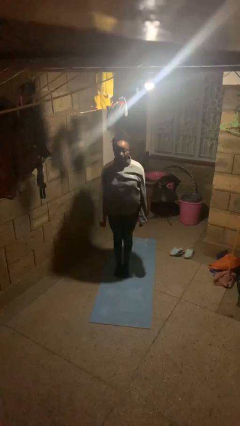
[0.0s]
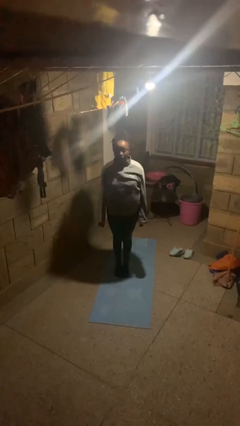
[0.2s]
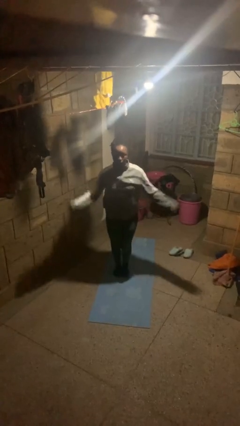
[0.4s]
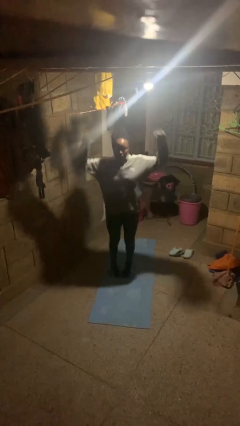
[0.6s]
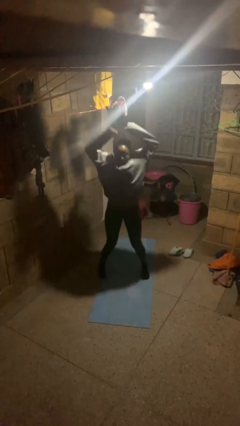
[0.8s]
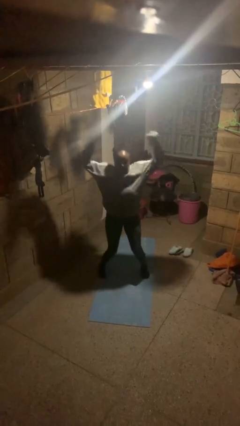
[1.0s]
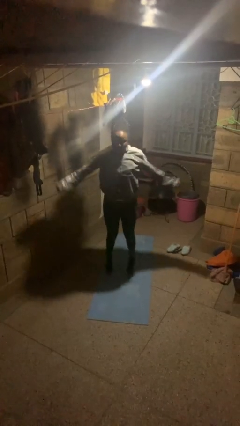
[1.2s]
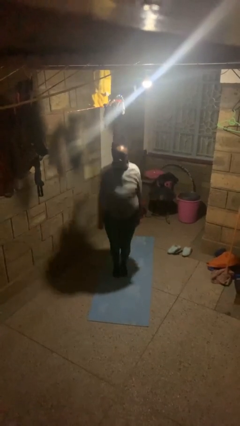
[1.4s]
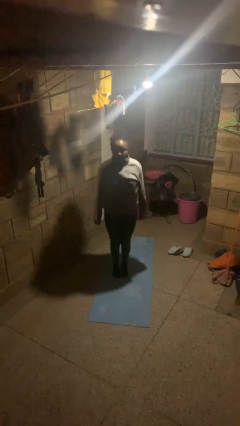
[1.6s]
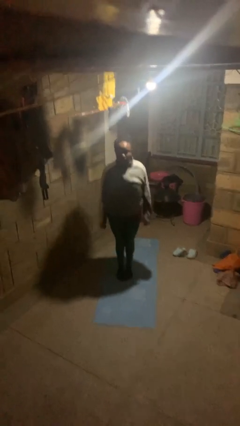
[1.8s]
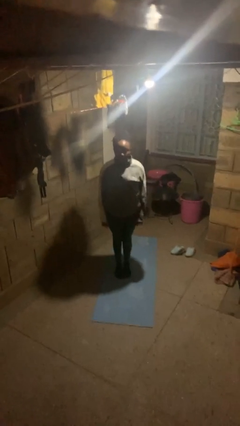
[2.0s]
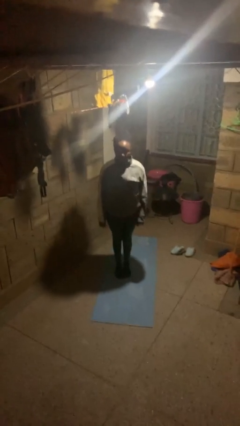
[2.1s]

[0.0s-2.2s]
person exercises with jumping jacks

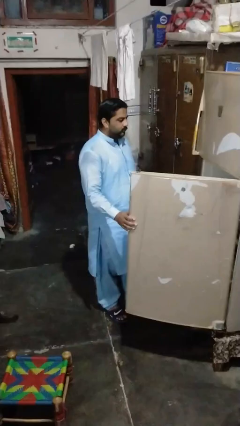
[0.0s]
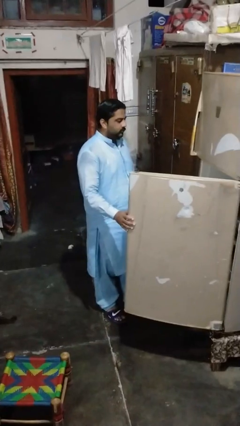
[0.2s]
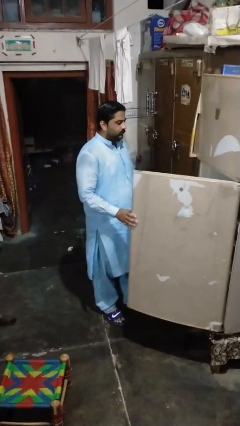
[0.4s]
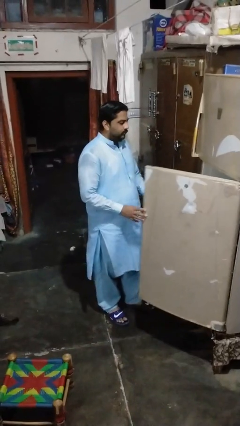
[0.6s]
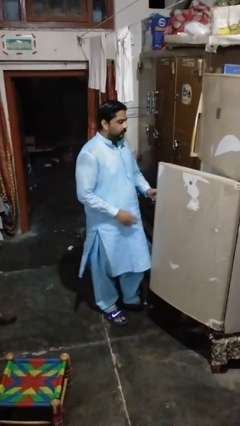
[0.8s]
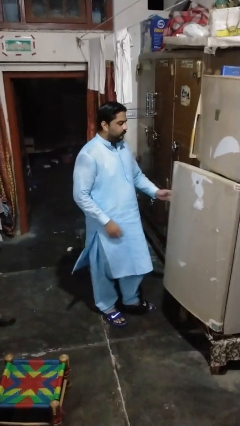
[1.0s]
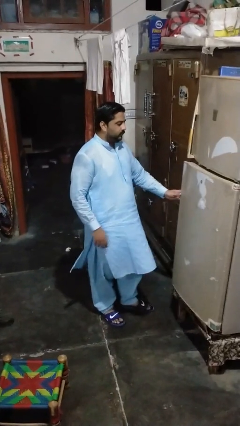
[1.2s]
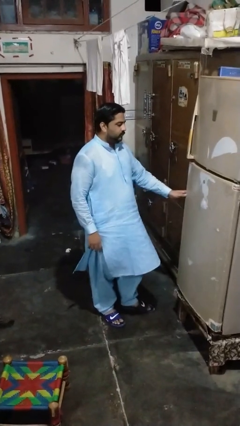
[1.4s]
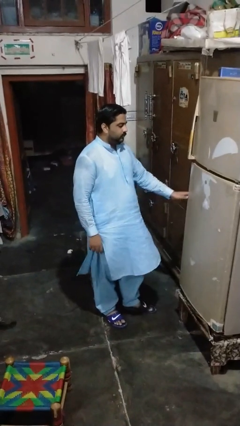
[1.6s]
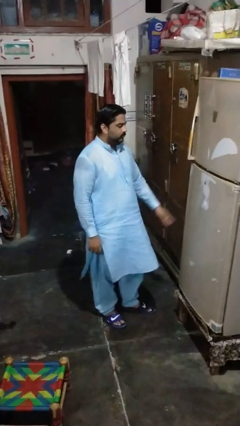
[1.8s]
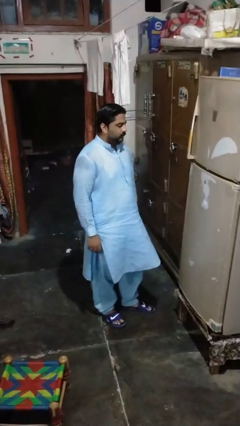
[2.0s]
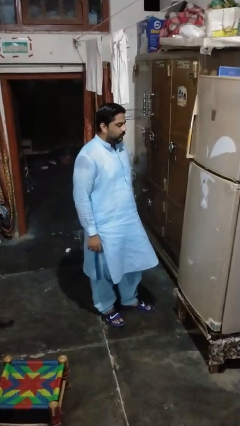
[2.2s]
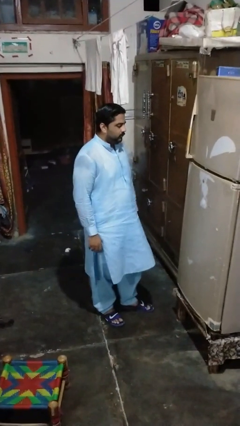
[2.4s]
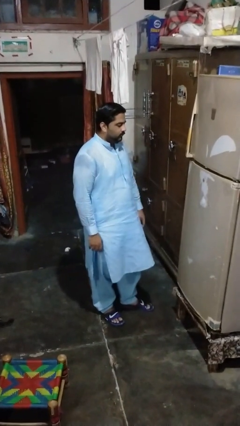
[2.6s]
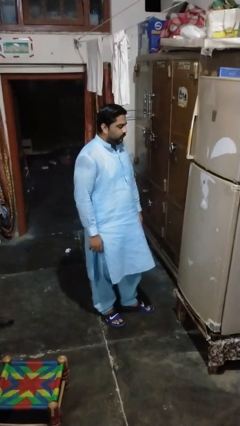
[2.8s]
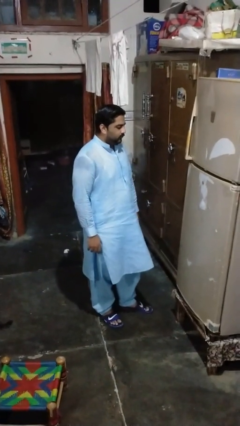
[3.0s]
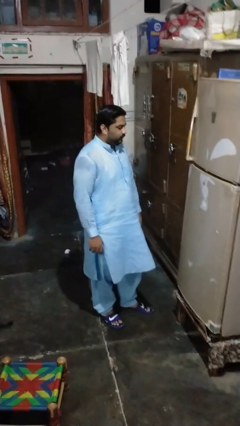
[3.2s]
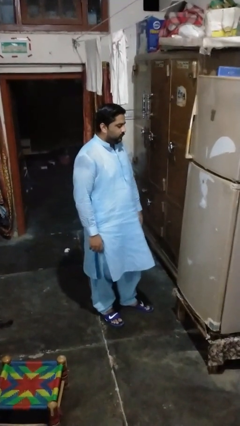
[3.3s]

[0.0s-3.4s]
person closes refrigerator

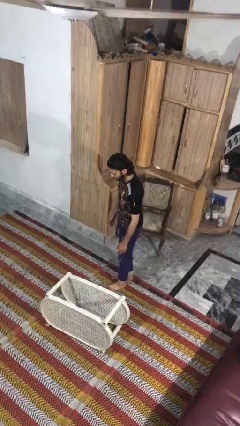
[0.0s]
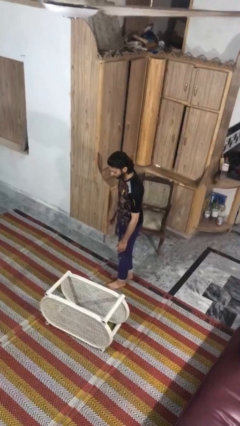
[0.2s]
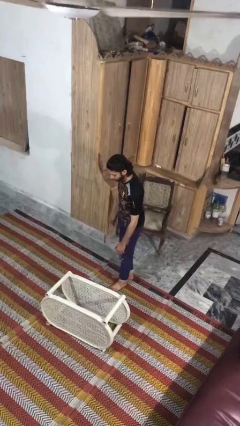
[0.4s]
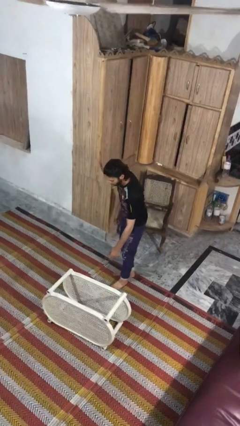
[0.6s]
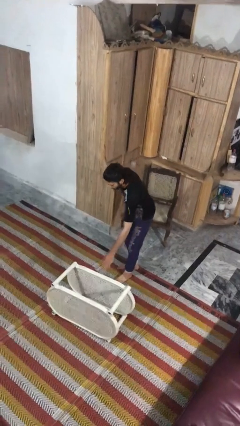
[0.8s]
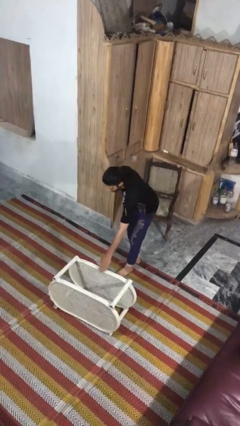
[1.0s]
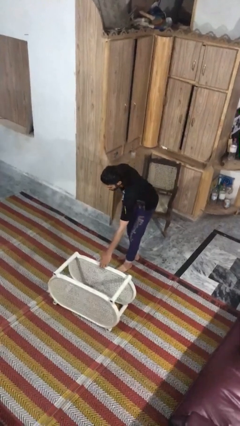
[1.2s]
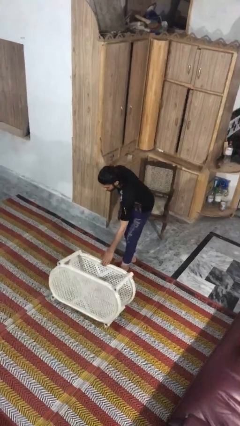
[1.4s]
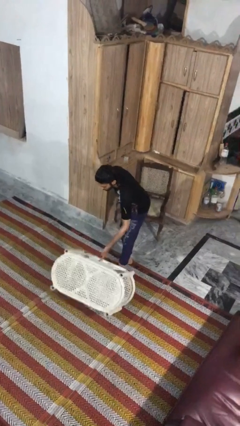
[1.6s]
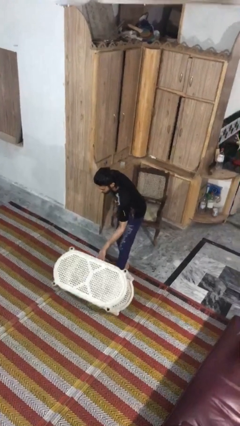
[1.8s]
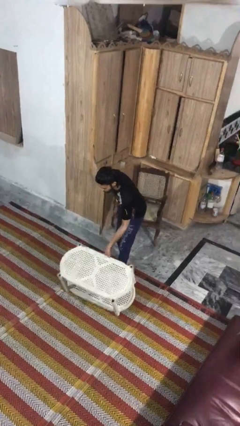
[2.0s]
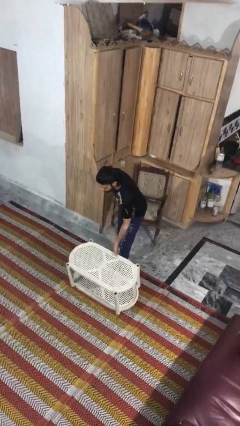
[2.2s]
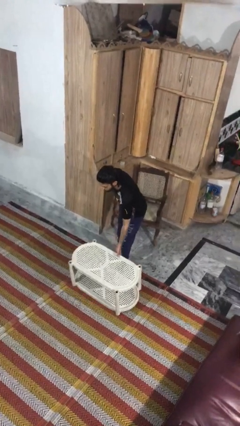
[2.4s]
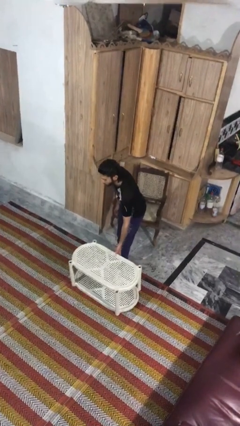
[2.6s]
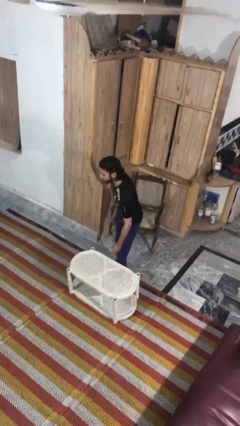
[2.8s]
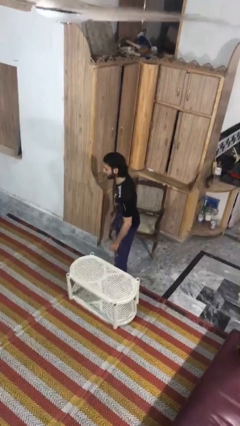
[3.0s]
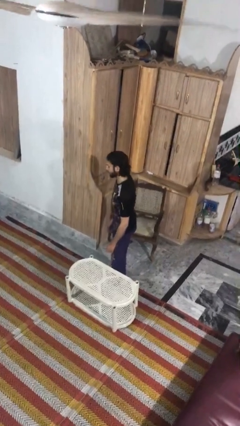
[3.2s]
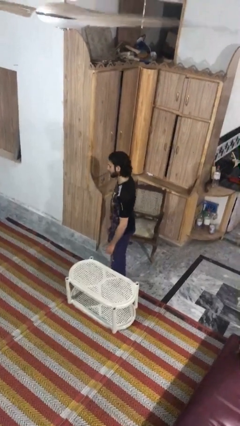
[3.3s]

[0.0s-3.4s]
person sets upright furniture

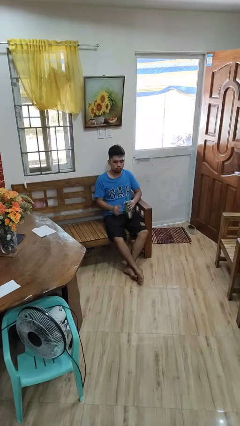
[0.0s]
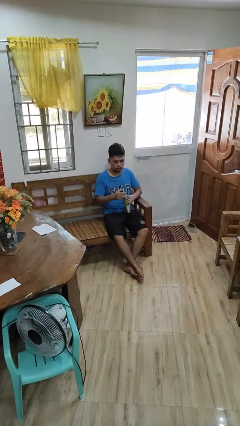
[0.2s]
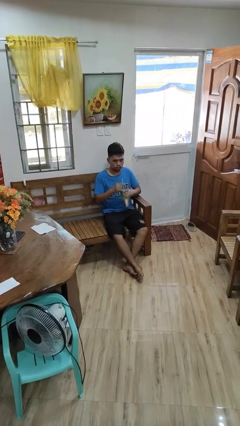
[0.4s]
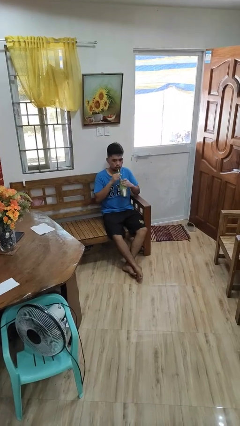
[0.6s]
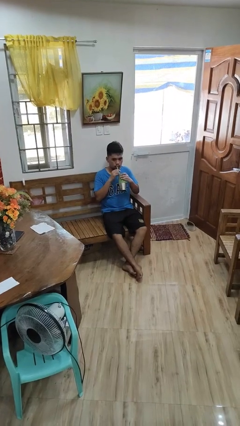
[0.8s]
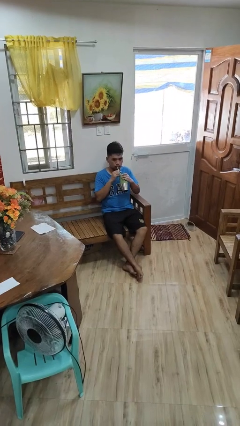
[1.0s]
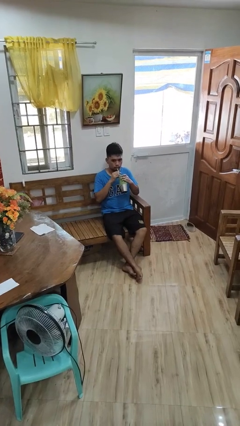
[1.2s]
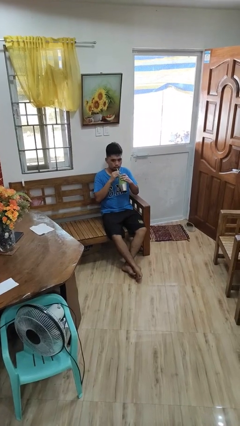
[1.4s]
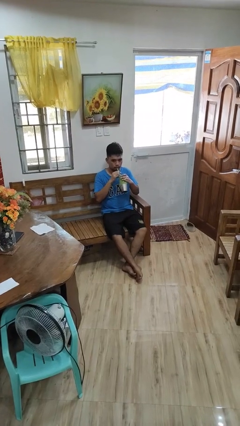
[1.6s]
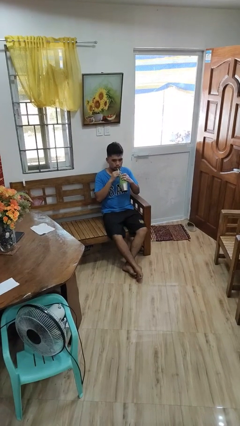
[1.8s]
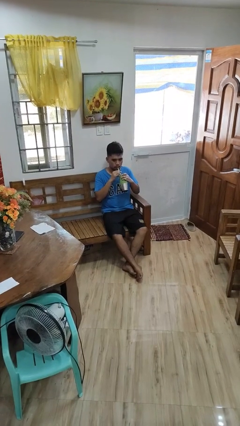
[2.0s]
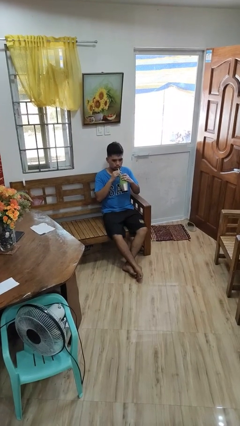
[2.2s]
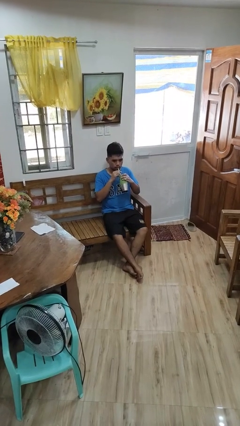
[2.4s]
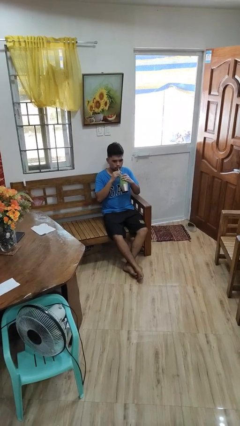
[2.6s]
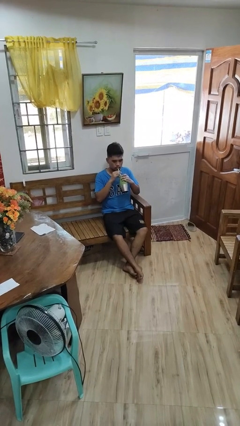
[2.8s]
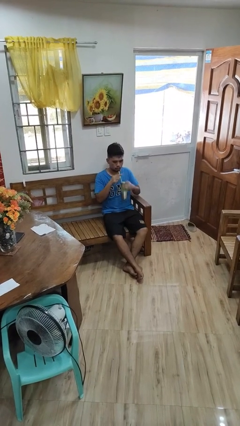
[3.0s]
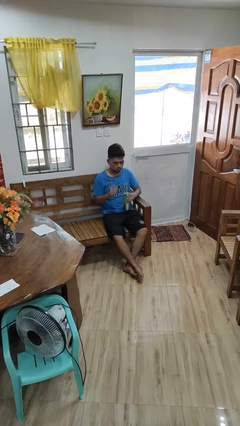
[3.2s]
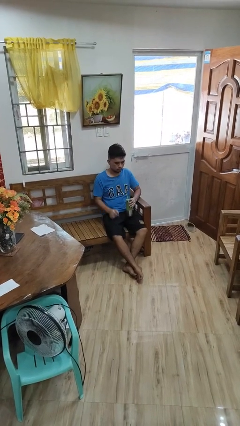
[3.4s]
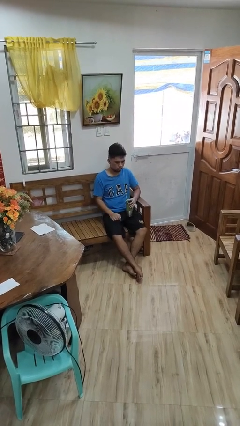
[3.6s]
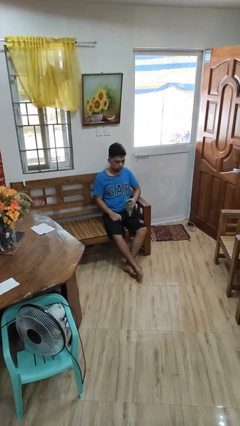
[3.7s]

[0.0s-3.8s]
person drinks from straw

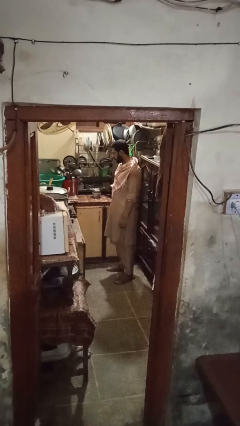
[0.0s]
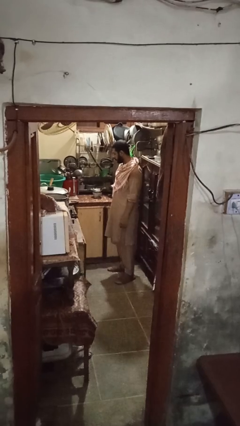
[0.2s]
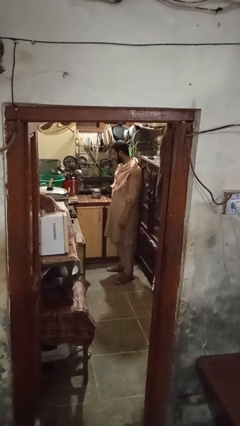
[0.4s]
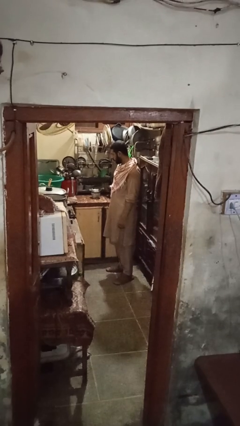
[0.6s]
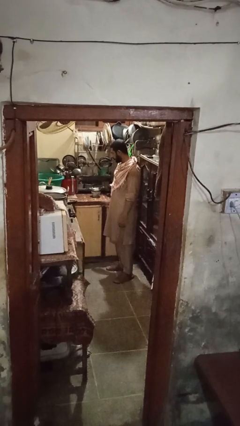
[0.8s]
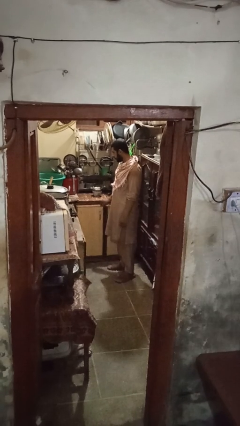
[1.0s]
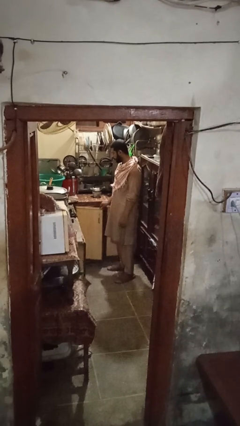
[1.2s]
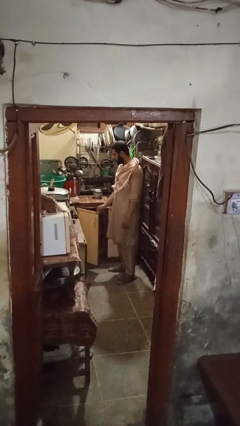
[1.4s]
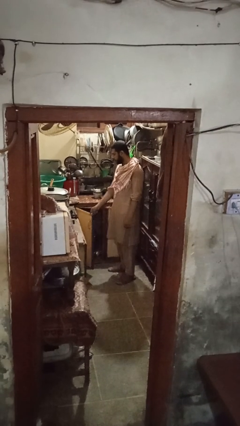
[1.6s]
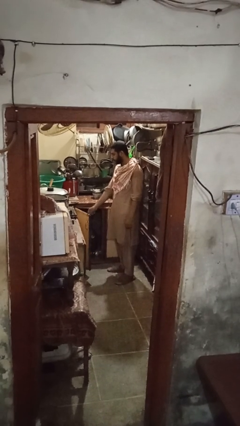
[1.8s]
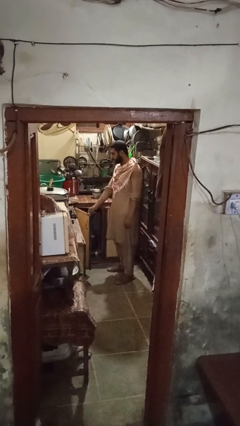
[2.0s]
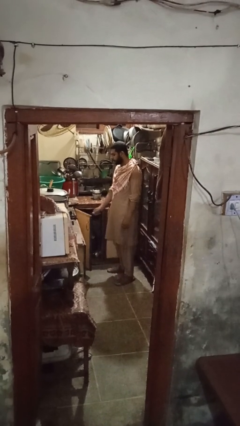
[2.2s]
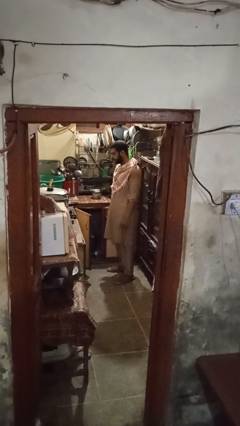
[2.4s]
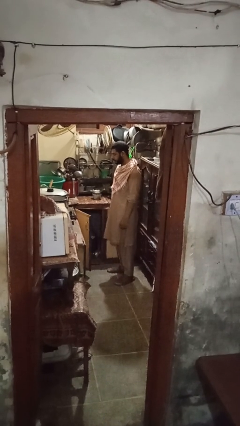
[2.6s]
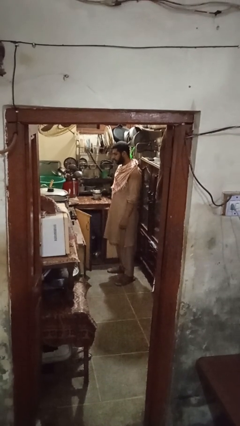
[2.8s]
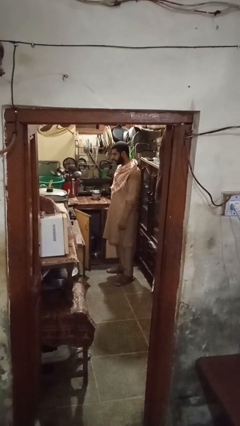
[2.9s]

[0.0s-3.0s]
person opens cabinet

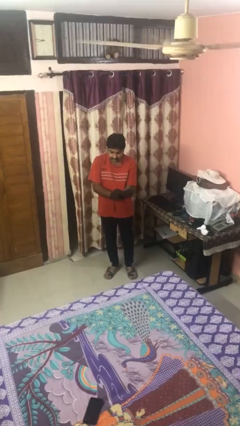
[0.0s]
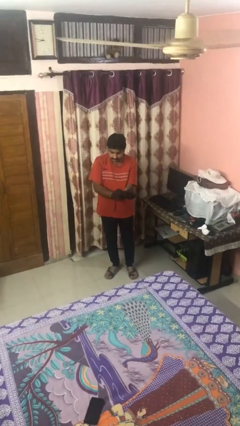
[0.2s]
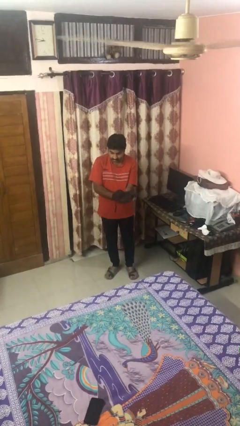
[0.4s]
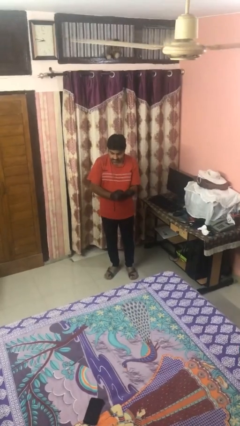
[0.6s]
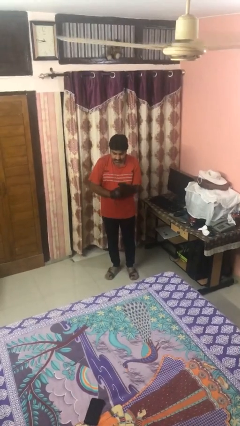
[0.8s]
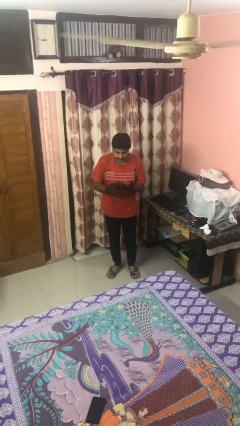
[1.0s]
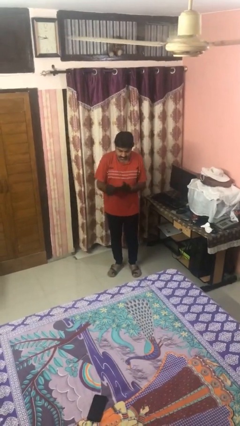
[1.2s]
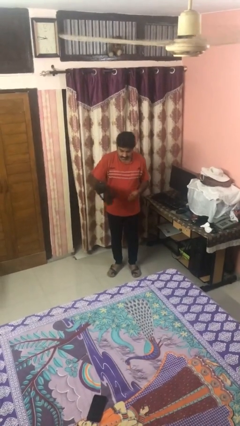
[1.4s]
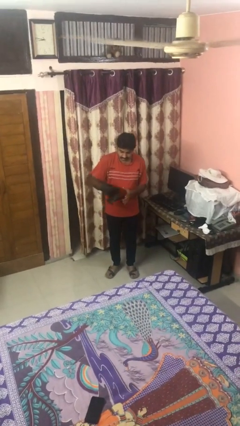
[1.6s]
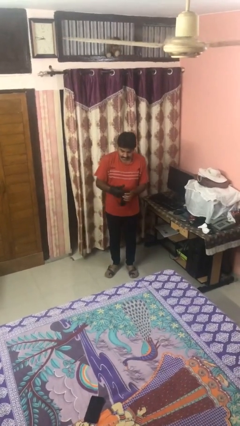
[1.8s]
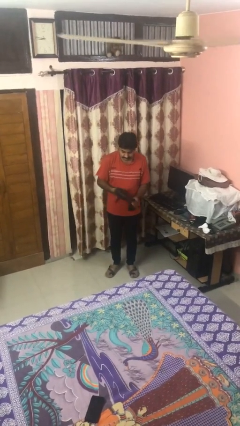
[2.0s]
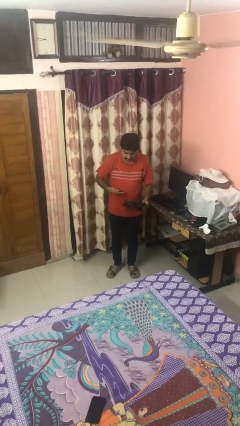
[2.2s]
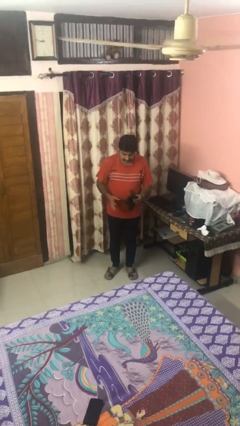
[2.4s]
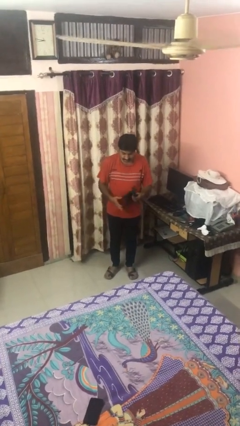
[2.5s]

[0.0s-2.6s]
person takes off gloves
